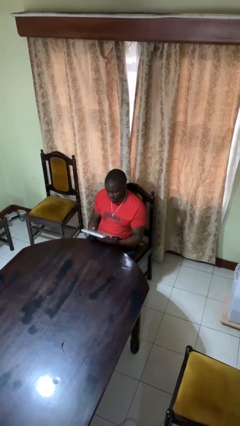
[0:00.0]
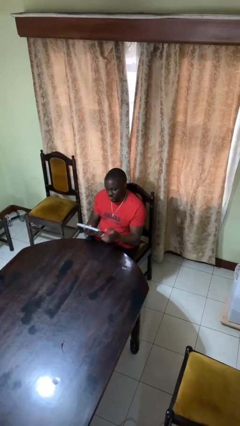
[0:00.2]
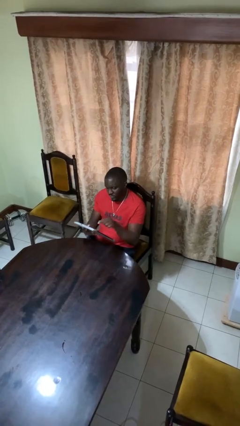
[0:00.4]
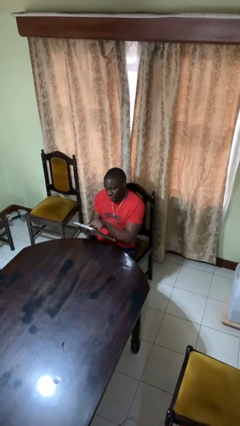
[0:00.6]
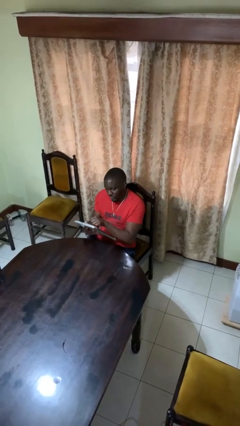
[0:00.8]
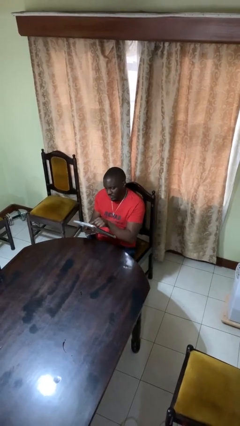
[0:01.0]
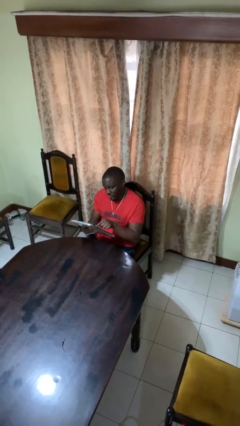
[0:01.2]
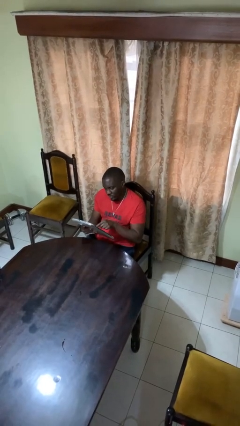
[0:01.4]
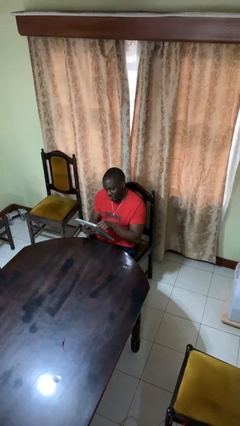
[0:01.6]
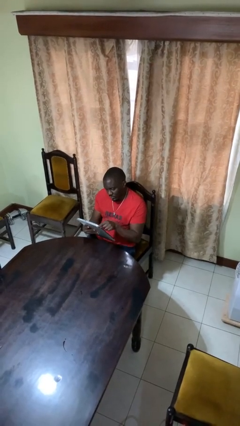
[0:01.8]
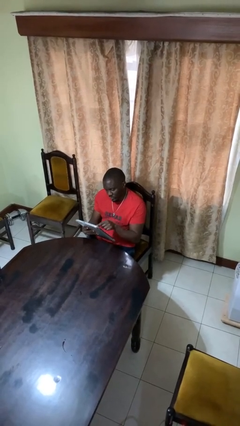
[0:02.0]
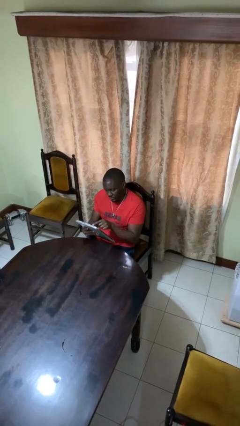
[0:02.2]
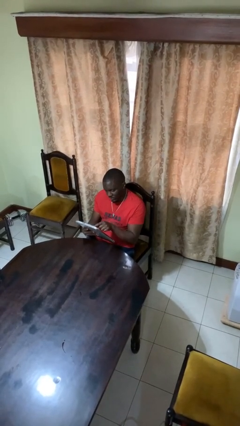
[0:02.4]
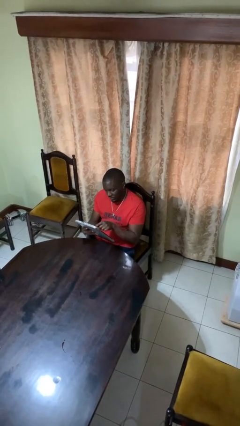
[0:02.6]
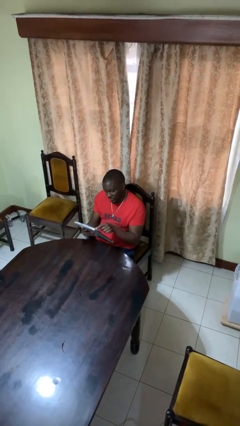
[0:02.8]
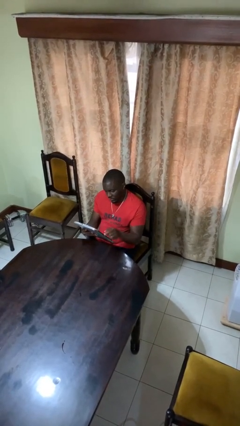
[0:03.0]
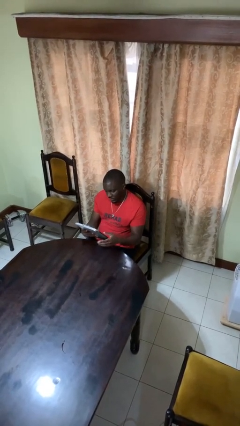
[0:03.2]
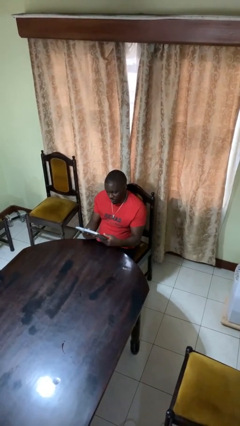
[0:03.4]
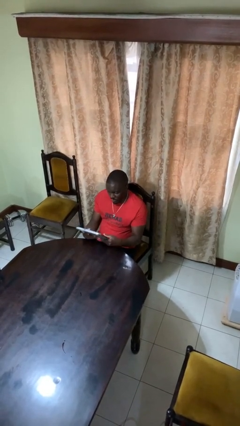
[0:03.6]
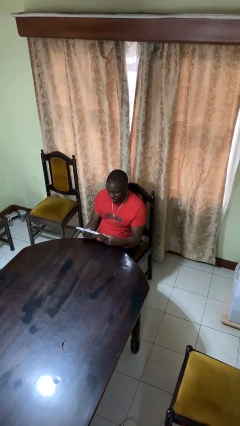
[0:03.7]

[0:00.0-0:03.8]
person interacts with tablet

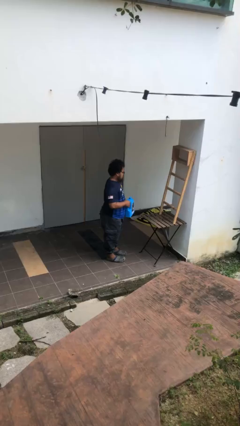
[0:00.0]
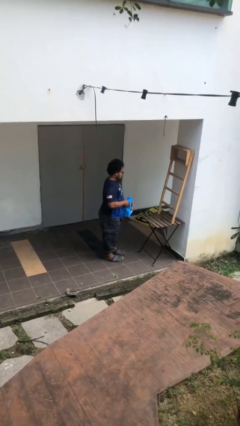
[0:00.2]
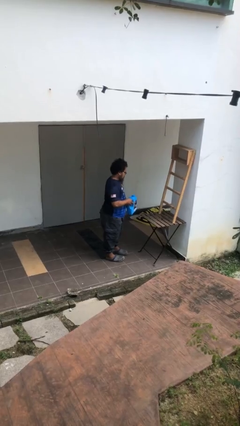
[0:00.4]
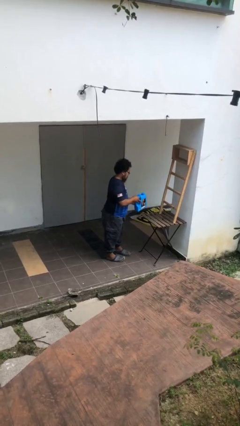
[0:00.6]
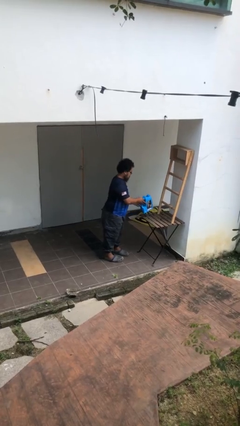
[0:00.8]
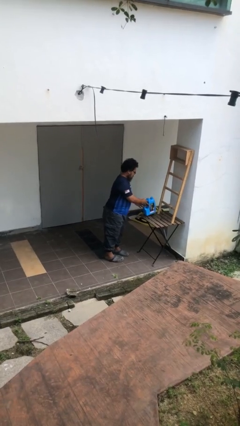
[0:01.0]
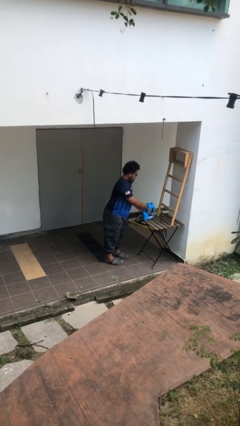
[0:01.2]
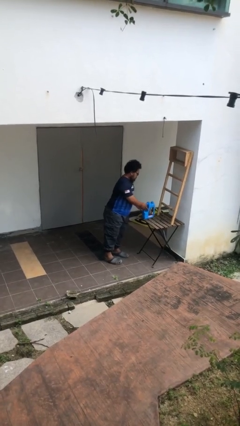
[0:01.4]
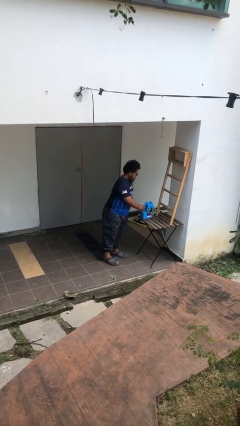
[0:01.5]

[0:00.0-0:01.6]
person puts down object on table

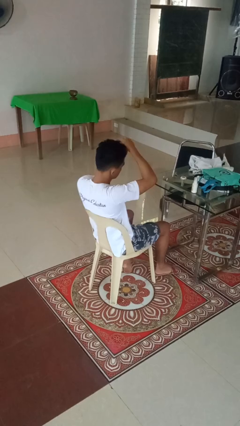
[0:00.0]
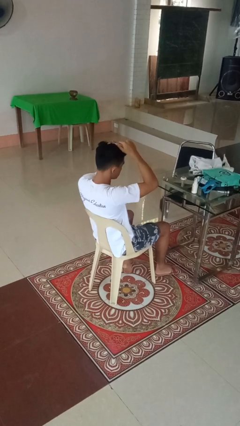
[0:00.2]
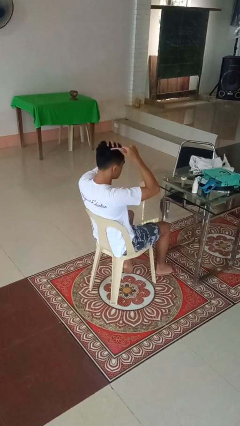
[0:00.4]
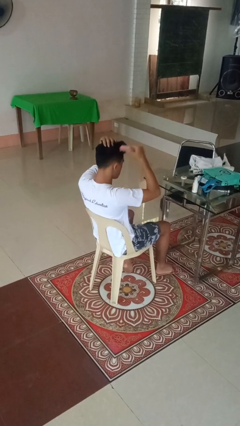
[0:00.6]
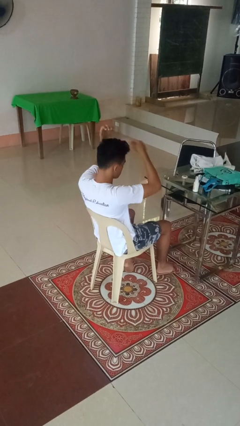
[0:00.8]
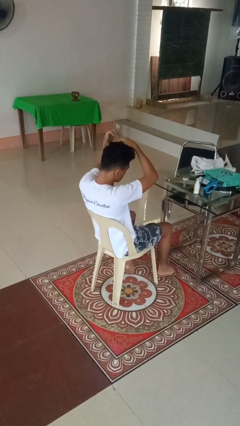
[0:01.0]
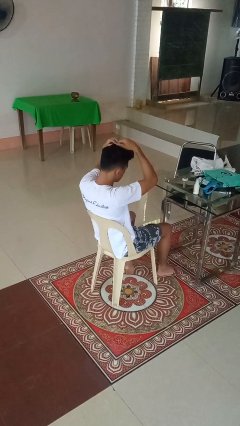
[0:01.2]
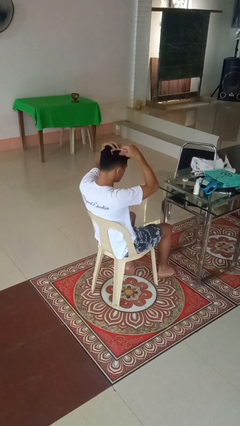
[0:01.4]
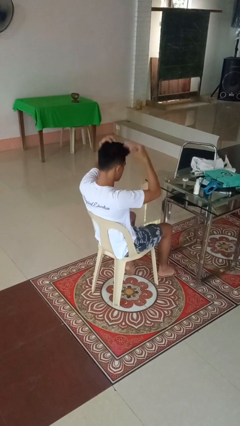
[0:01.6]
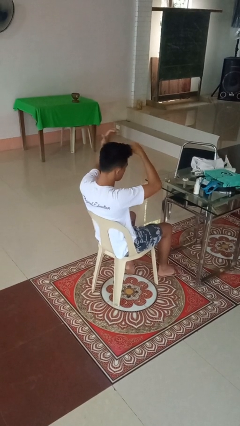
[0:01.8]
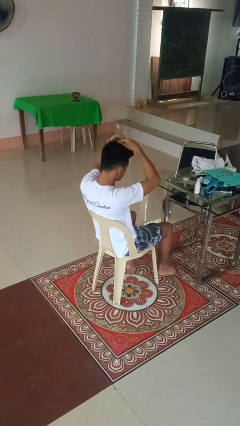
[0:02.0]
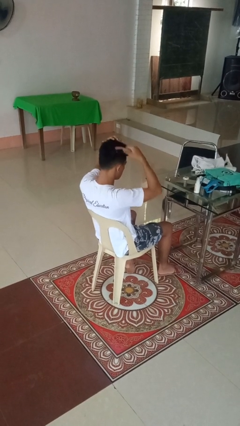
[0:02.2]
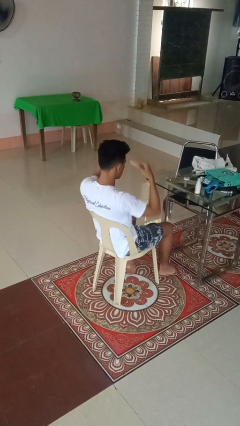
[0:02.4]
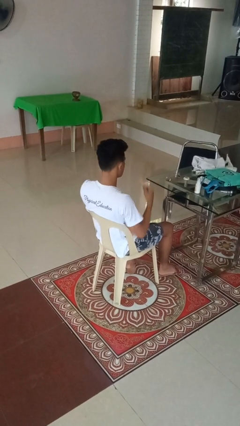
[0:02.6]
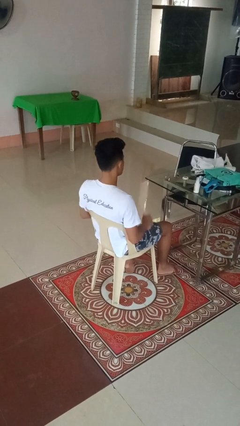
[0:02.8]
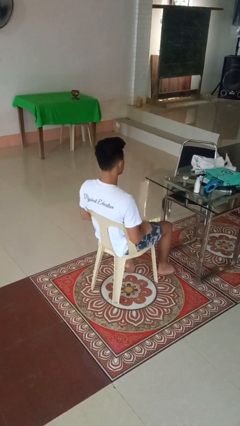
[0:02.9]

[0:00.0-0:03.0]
person brushes hair

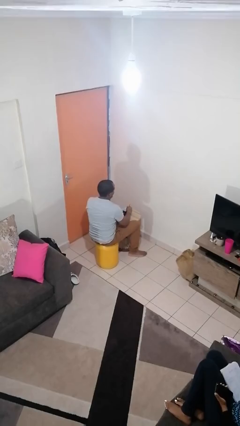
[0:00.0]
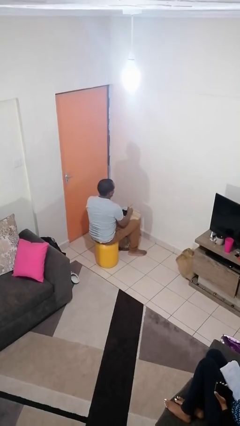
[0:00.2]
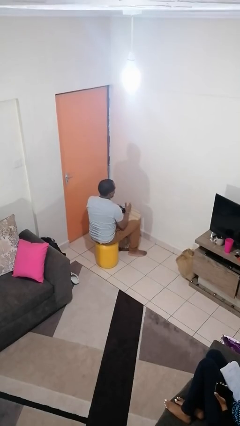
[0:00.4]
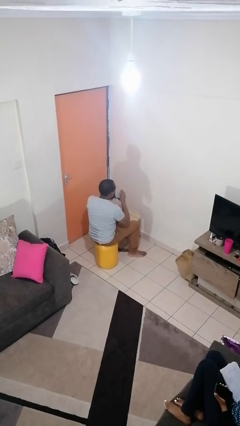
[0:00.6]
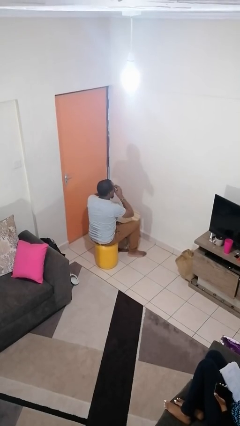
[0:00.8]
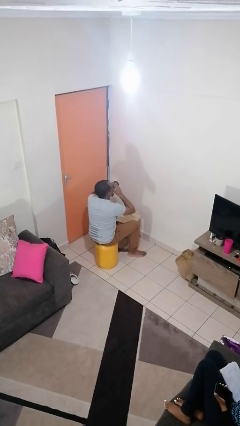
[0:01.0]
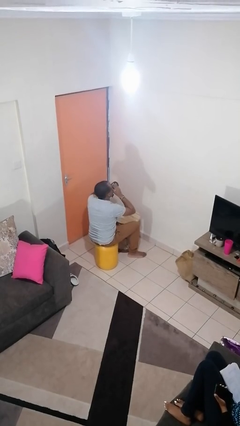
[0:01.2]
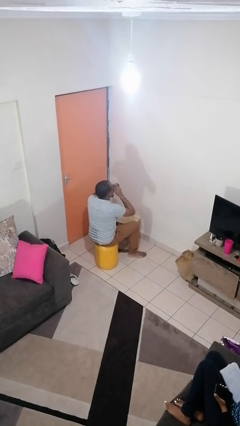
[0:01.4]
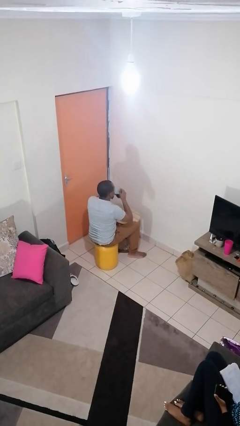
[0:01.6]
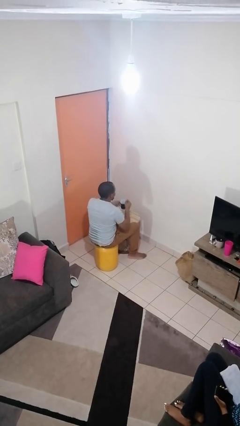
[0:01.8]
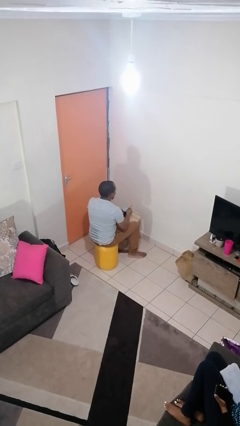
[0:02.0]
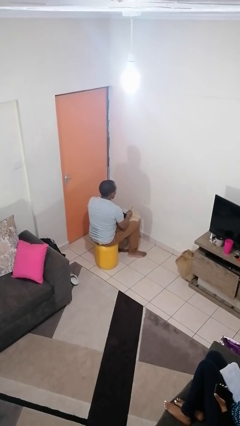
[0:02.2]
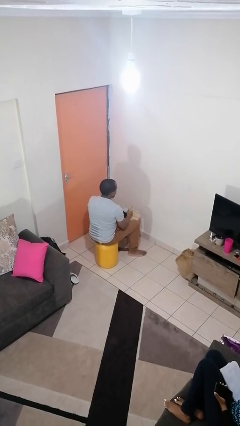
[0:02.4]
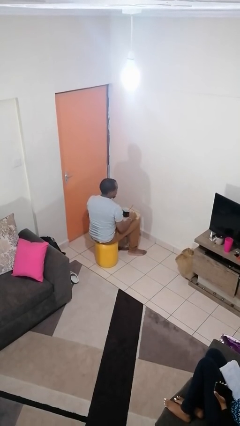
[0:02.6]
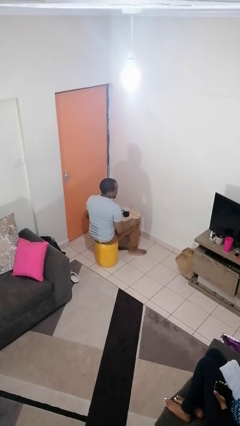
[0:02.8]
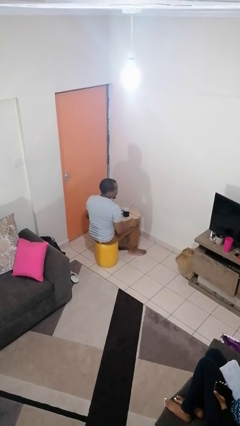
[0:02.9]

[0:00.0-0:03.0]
person drinks from mug

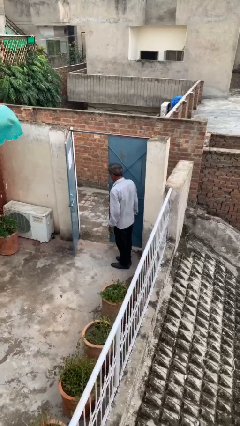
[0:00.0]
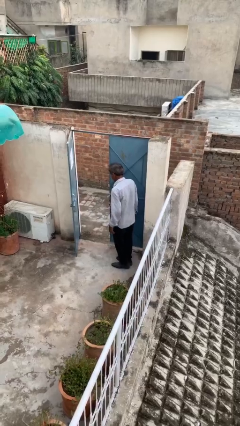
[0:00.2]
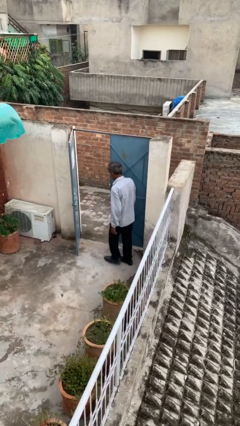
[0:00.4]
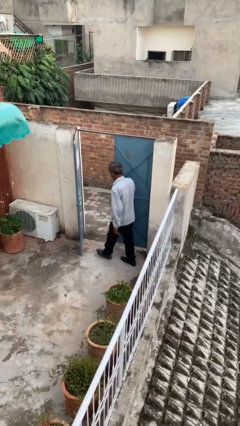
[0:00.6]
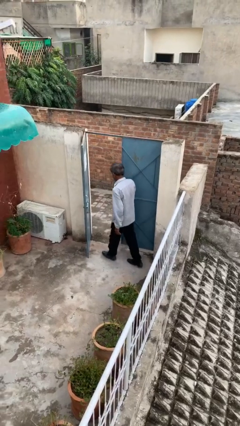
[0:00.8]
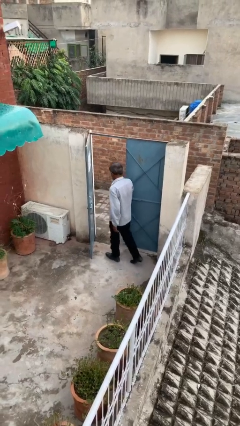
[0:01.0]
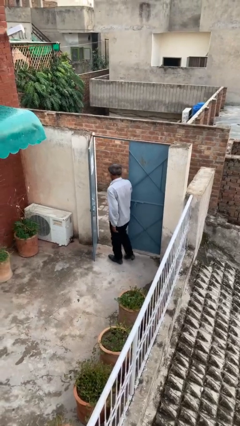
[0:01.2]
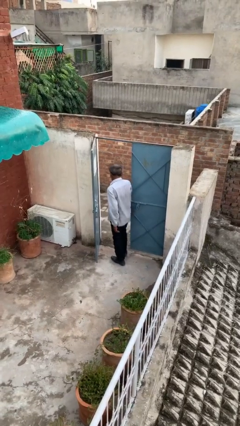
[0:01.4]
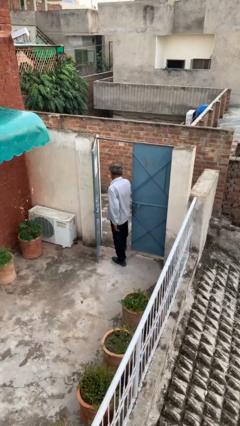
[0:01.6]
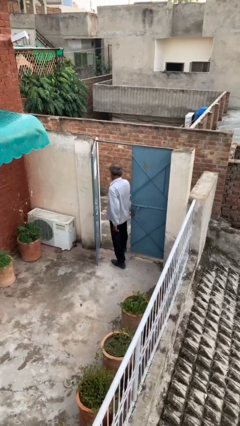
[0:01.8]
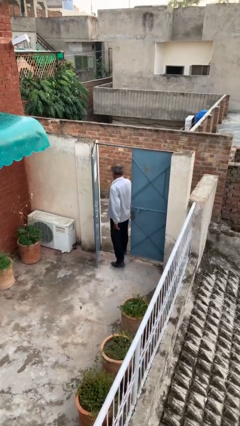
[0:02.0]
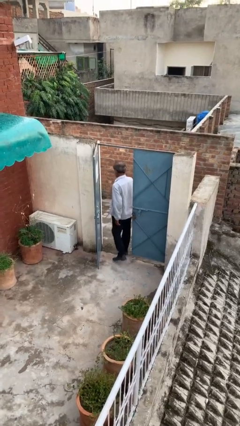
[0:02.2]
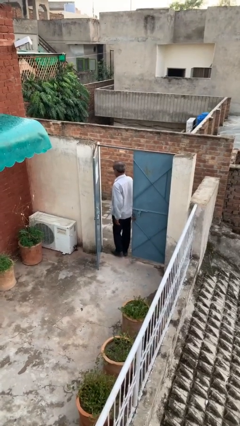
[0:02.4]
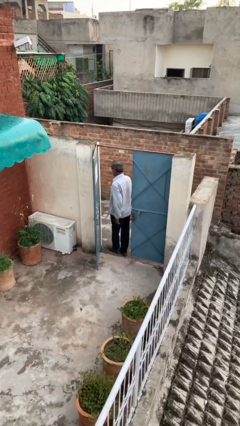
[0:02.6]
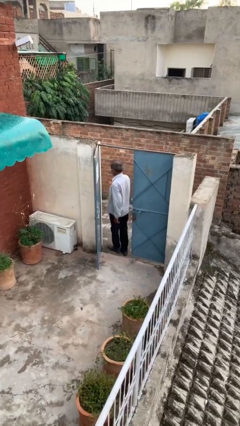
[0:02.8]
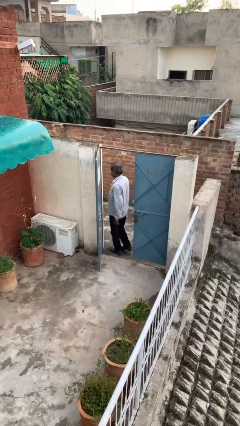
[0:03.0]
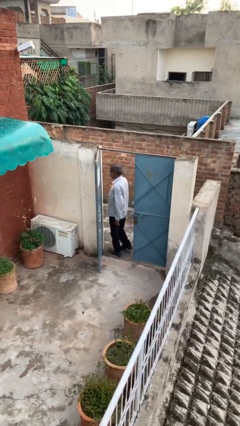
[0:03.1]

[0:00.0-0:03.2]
person exits scene through structure

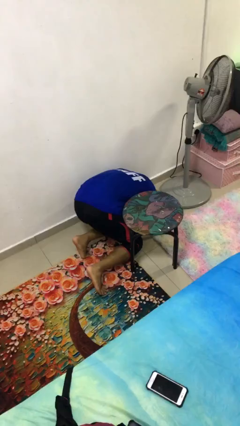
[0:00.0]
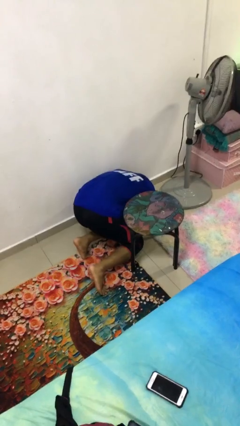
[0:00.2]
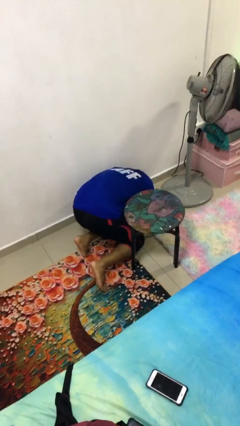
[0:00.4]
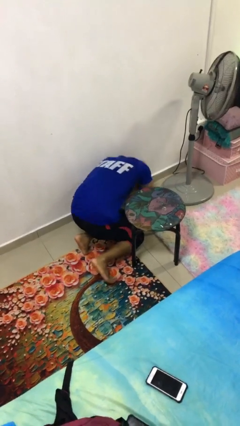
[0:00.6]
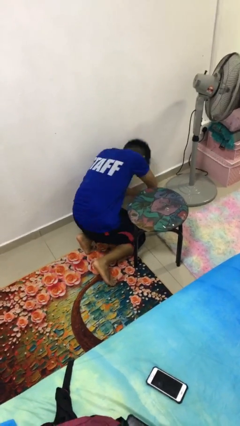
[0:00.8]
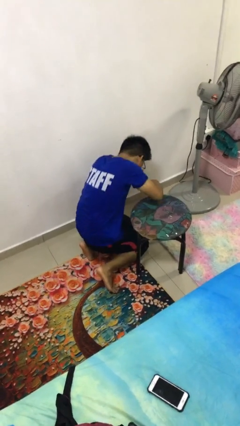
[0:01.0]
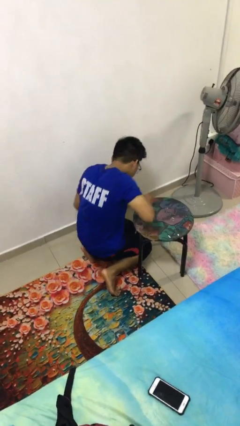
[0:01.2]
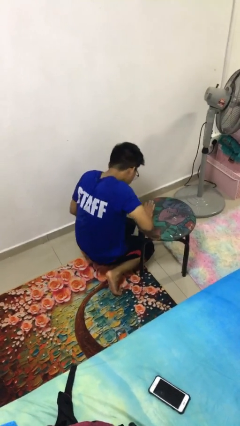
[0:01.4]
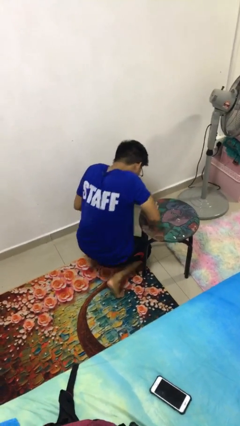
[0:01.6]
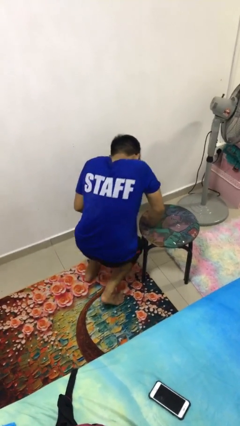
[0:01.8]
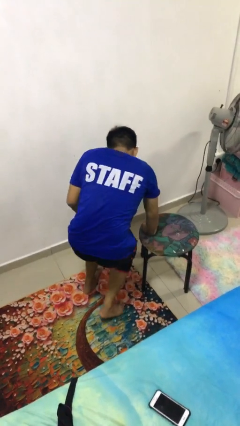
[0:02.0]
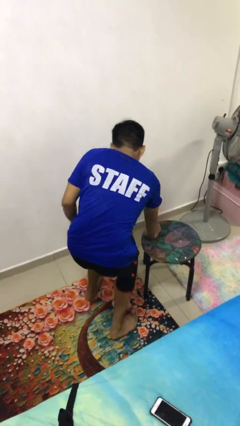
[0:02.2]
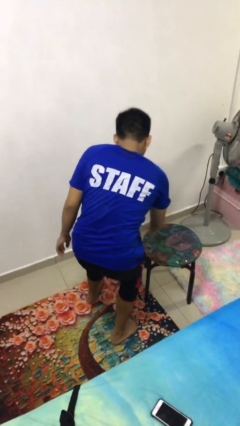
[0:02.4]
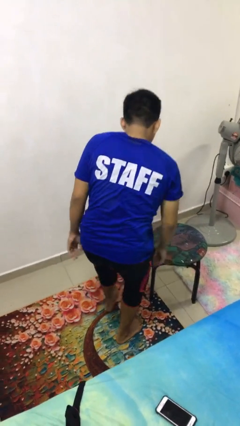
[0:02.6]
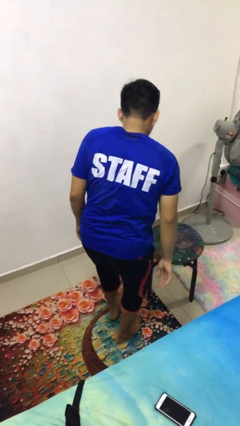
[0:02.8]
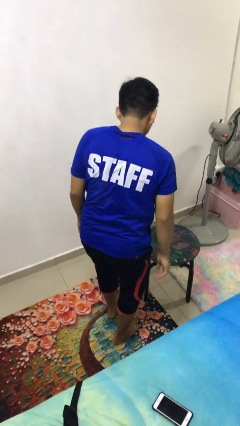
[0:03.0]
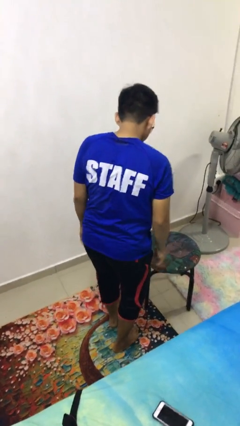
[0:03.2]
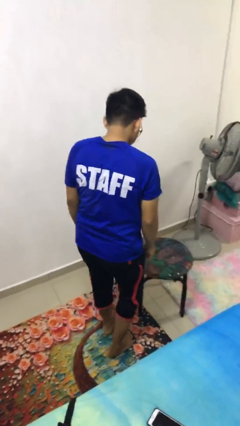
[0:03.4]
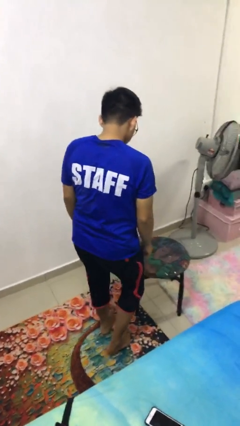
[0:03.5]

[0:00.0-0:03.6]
person stands up from floor
